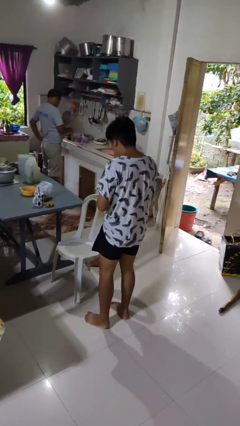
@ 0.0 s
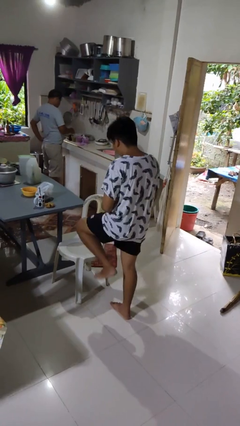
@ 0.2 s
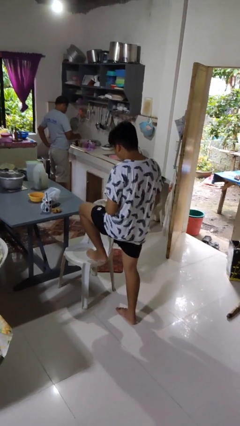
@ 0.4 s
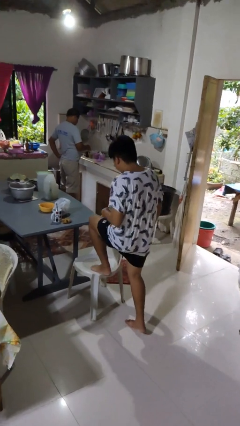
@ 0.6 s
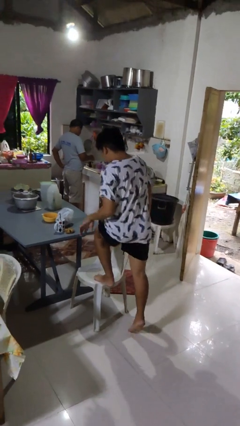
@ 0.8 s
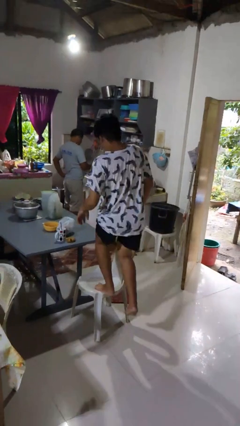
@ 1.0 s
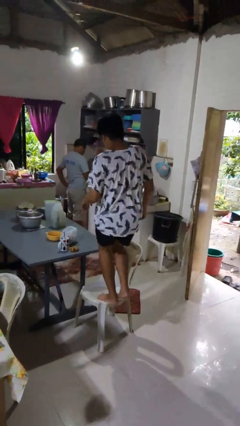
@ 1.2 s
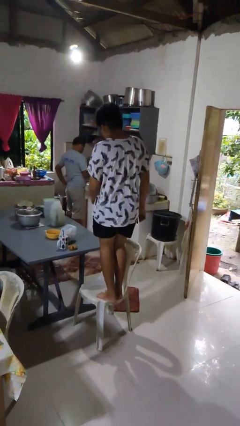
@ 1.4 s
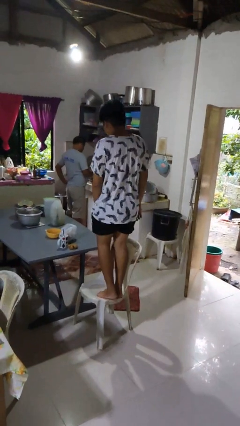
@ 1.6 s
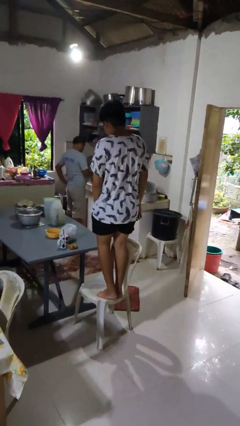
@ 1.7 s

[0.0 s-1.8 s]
person climbs on chair

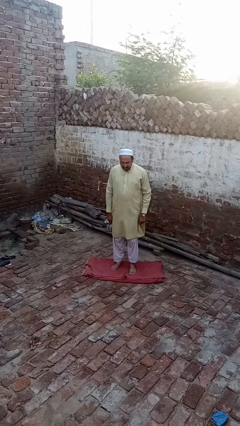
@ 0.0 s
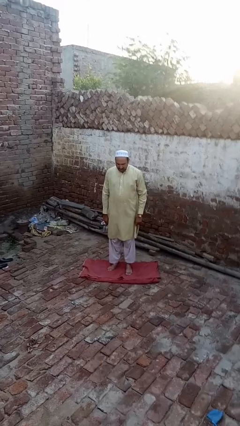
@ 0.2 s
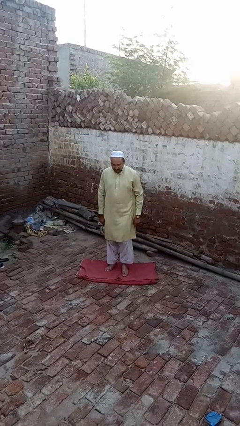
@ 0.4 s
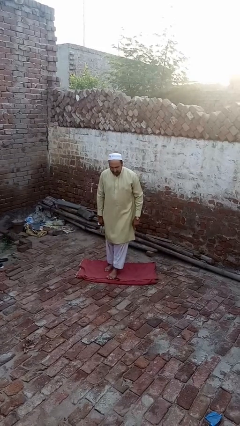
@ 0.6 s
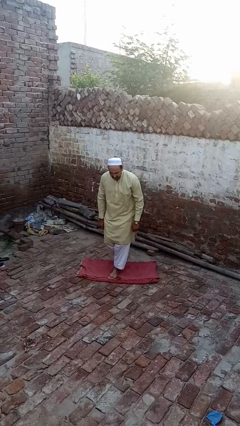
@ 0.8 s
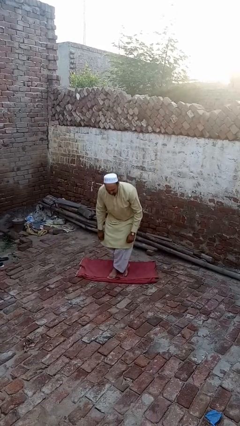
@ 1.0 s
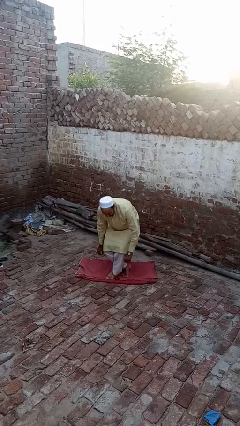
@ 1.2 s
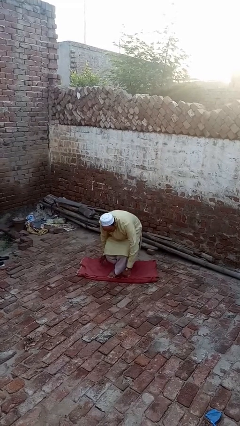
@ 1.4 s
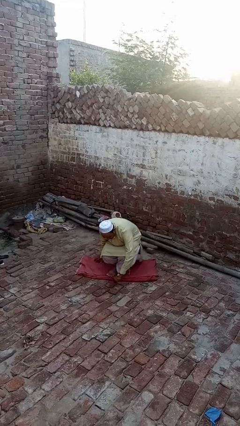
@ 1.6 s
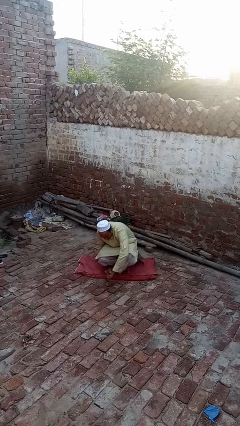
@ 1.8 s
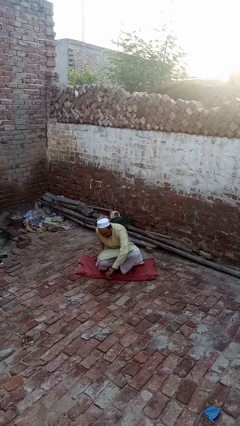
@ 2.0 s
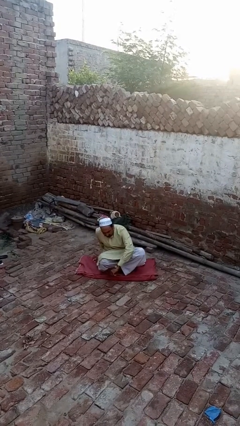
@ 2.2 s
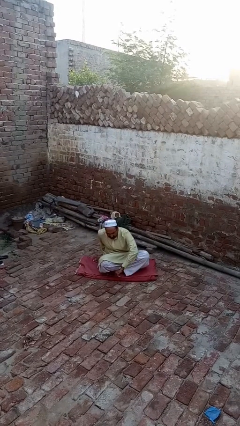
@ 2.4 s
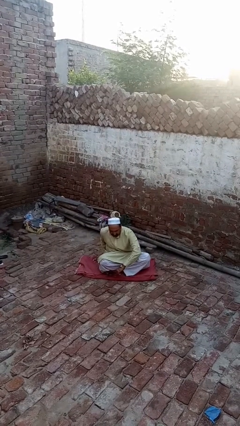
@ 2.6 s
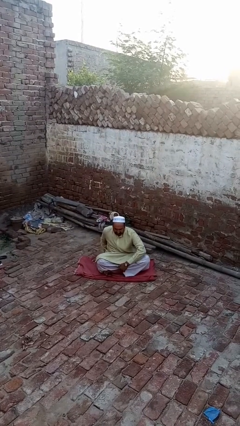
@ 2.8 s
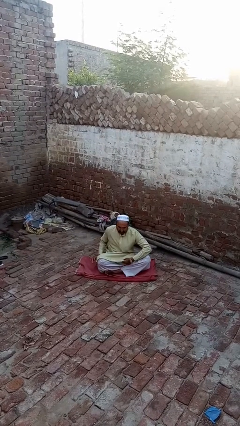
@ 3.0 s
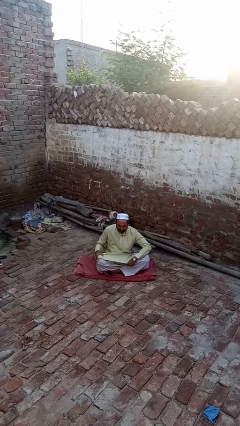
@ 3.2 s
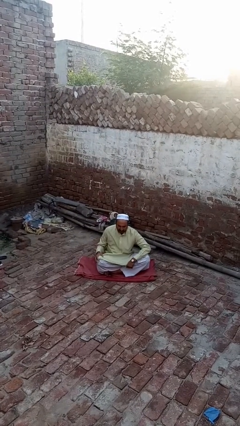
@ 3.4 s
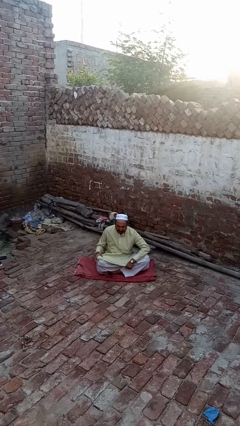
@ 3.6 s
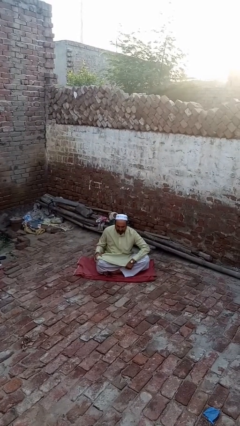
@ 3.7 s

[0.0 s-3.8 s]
person sits crisscross

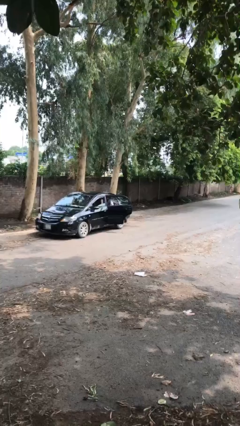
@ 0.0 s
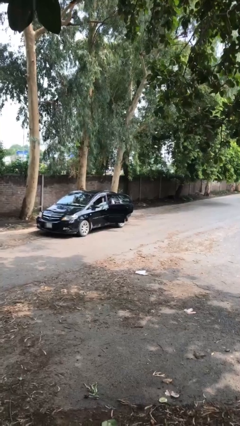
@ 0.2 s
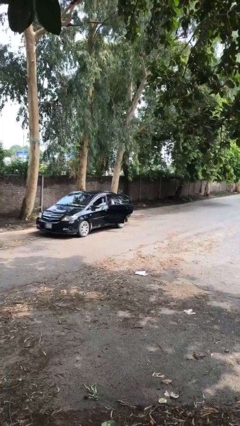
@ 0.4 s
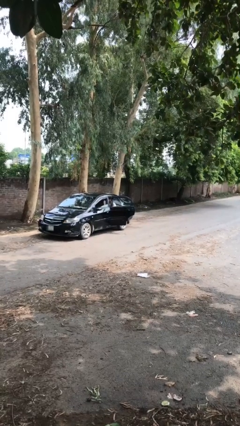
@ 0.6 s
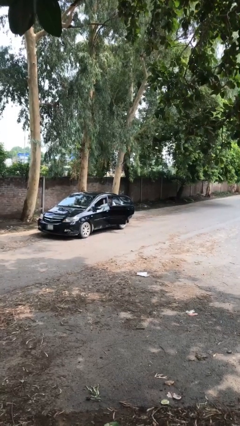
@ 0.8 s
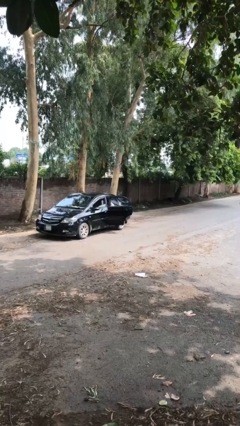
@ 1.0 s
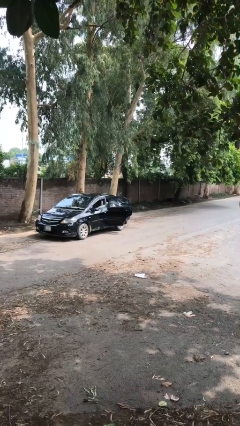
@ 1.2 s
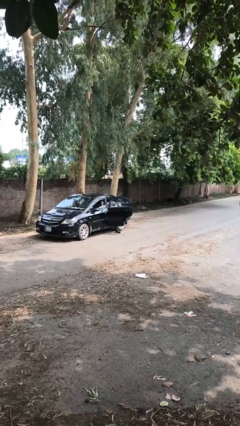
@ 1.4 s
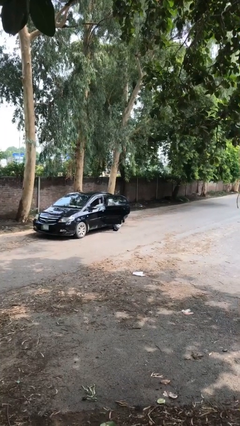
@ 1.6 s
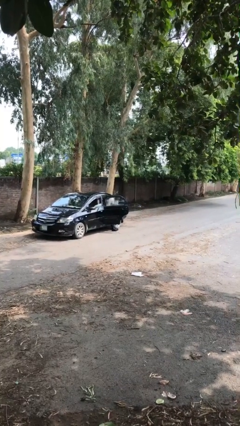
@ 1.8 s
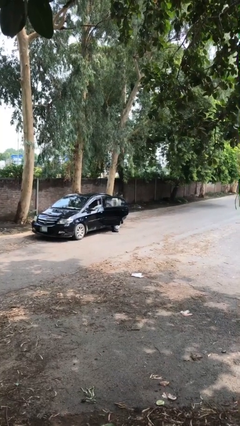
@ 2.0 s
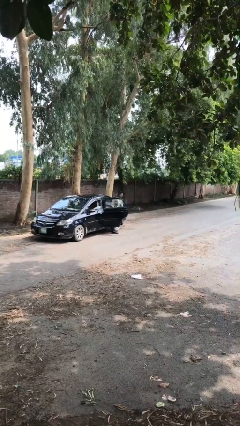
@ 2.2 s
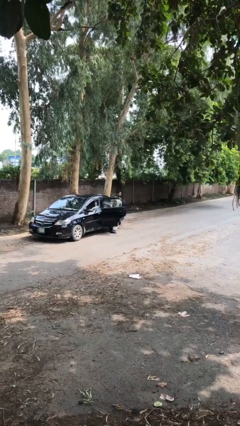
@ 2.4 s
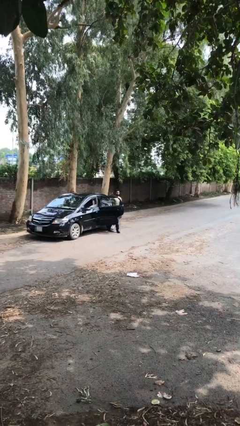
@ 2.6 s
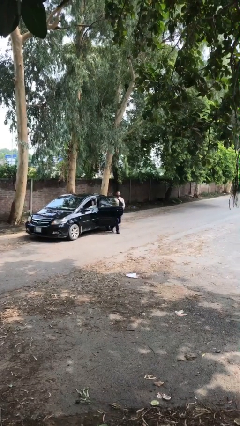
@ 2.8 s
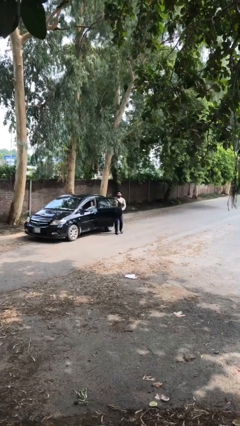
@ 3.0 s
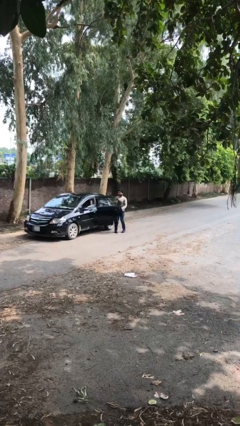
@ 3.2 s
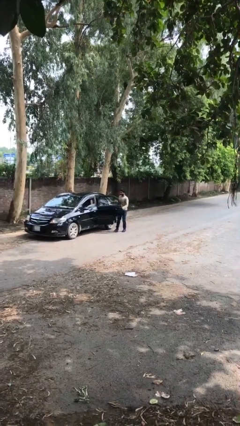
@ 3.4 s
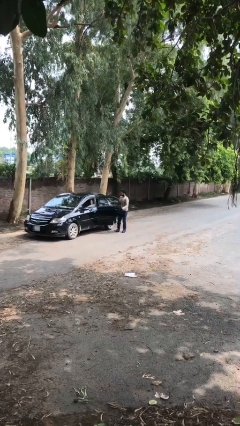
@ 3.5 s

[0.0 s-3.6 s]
person exits car

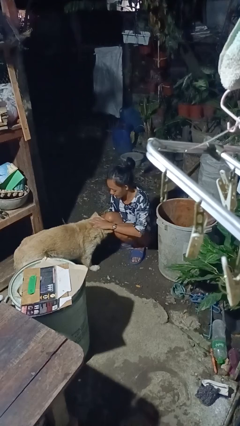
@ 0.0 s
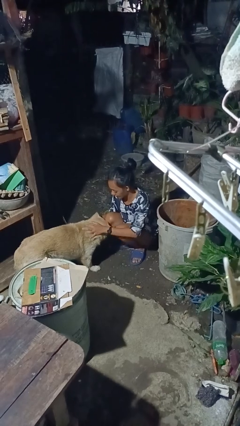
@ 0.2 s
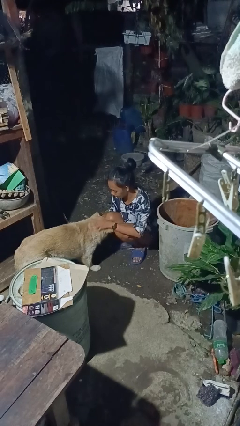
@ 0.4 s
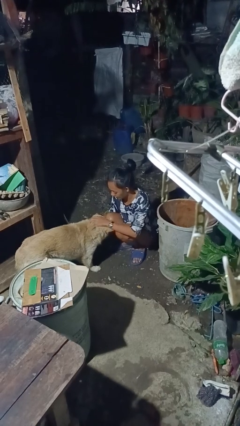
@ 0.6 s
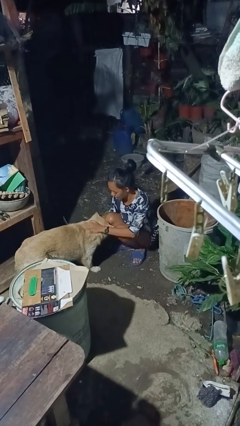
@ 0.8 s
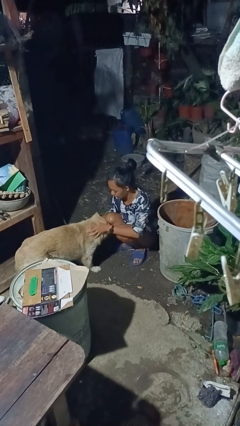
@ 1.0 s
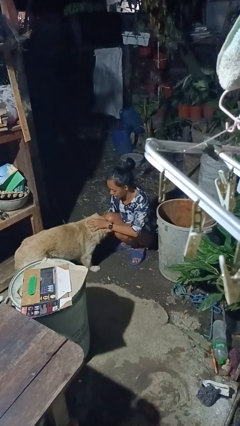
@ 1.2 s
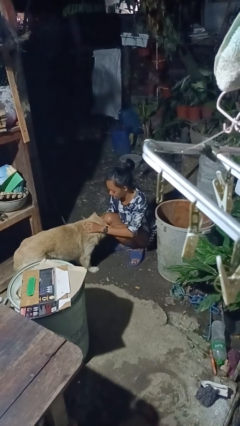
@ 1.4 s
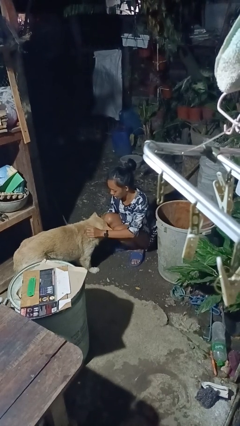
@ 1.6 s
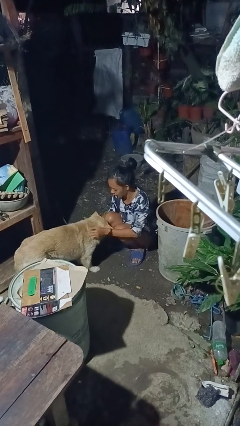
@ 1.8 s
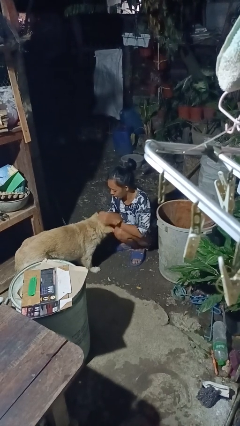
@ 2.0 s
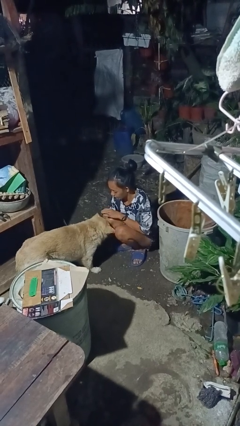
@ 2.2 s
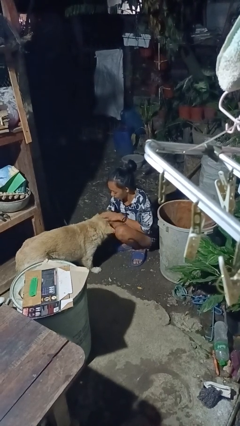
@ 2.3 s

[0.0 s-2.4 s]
person pets dog

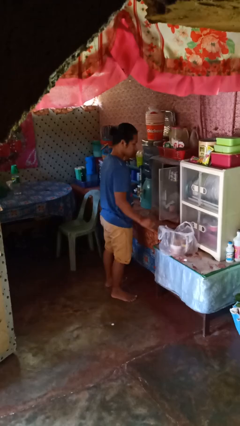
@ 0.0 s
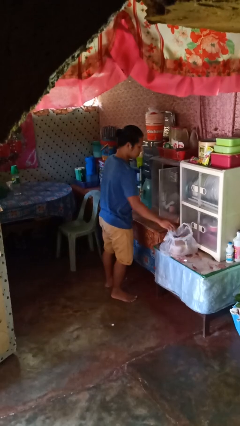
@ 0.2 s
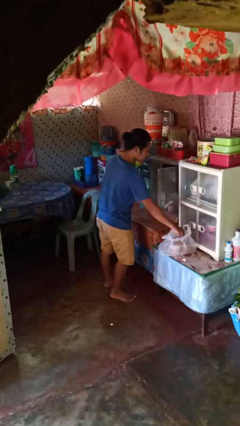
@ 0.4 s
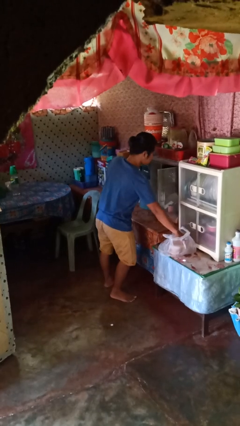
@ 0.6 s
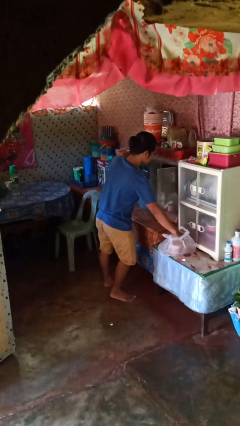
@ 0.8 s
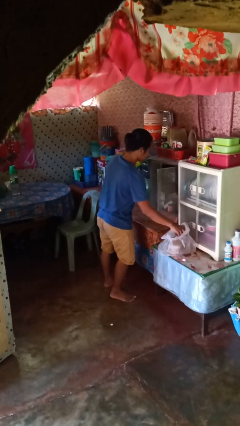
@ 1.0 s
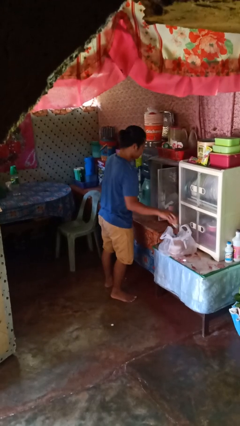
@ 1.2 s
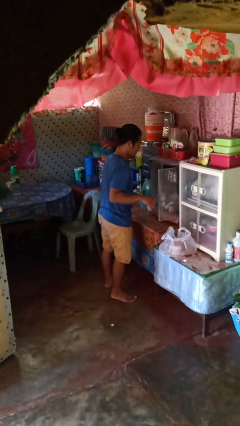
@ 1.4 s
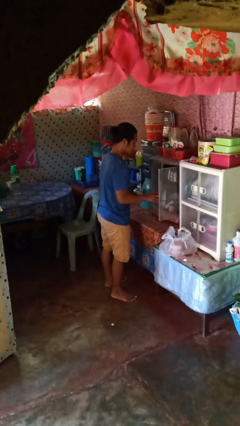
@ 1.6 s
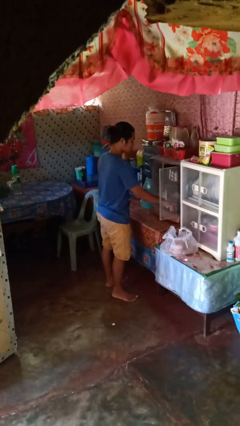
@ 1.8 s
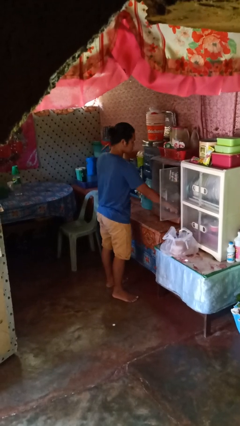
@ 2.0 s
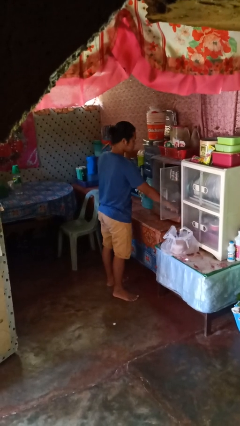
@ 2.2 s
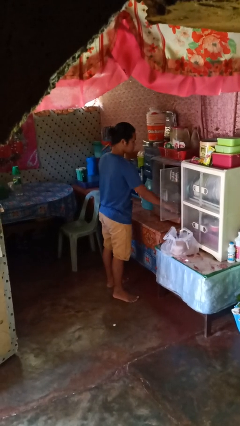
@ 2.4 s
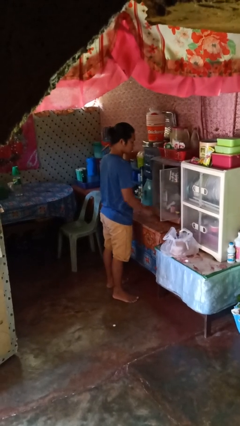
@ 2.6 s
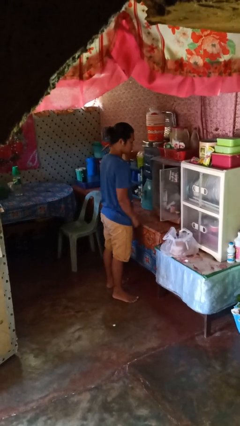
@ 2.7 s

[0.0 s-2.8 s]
person loads groceries into cabinet

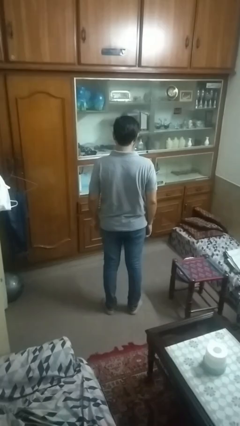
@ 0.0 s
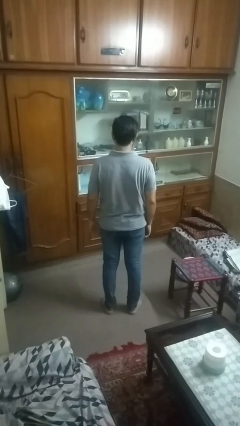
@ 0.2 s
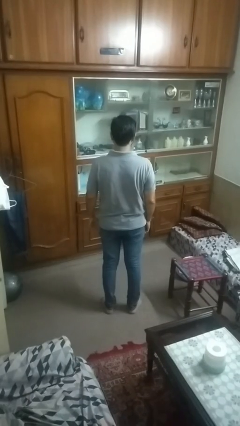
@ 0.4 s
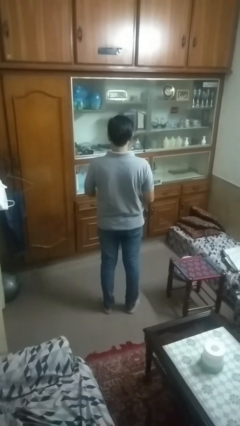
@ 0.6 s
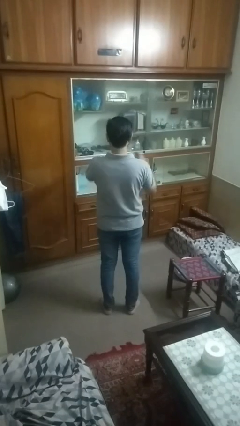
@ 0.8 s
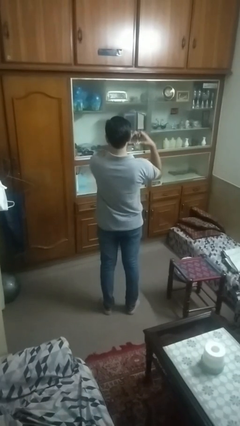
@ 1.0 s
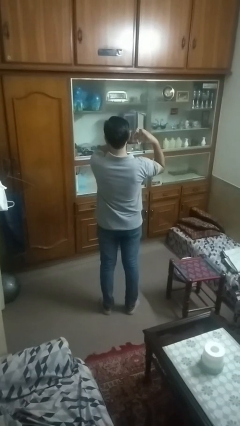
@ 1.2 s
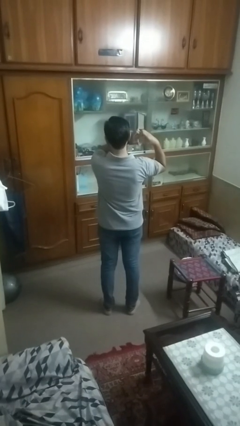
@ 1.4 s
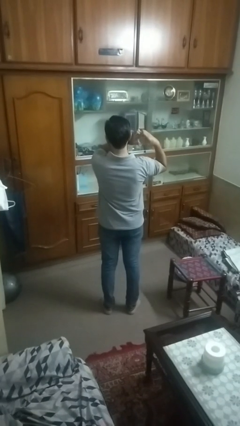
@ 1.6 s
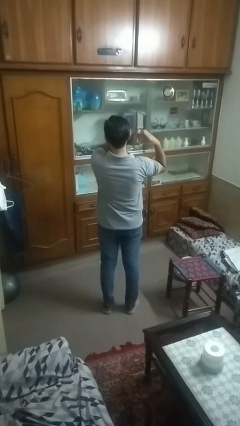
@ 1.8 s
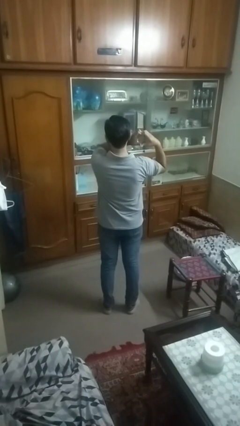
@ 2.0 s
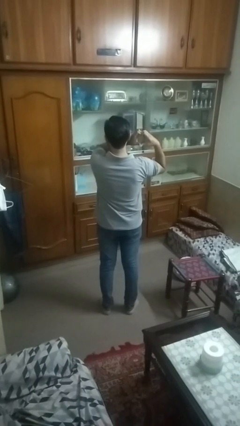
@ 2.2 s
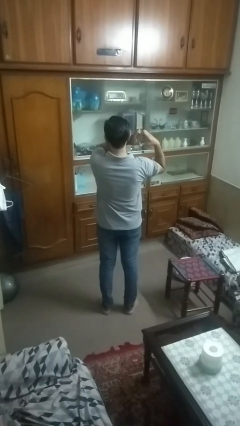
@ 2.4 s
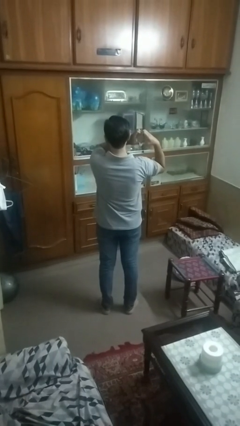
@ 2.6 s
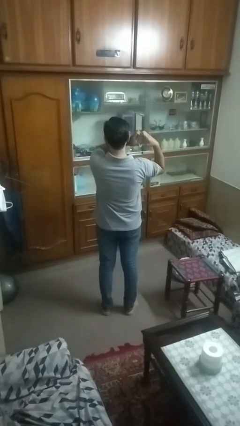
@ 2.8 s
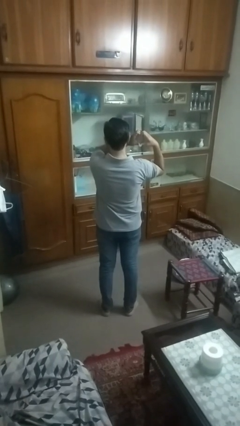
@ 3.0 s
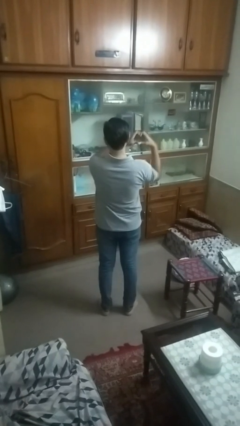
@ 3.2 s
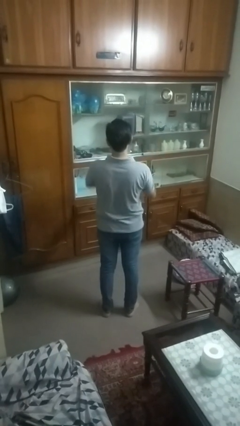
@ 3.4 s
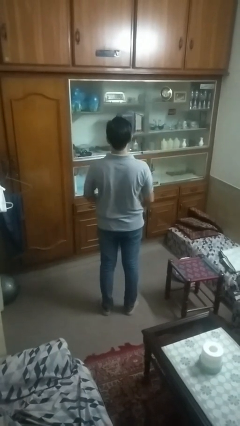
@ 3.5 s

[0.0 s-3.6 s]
person gestures heart
